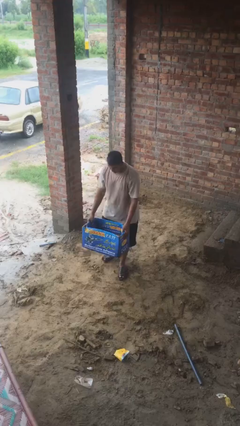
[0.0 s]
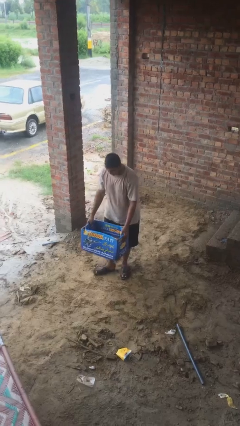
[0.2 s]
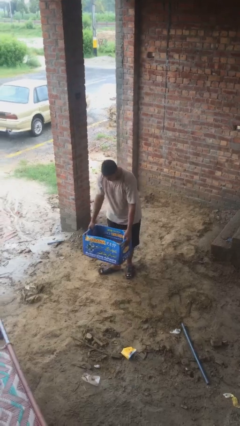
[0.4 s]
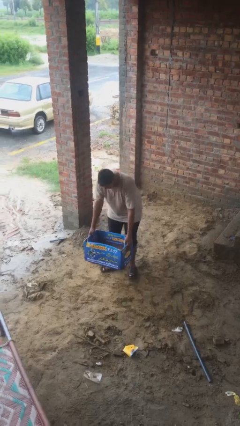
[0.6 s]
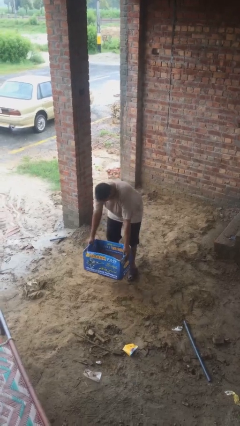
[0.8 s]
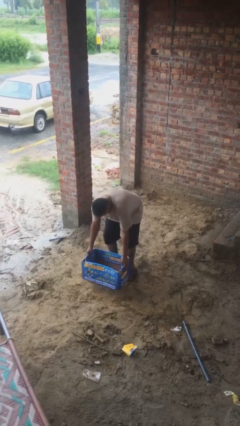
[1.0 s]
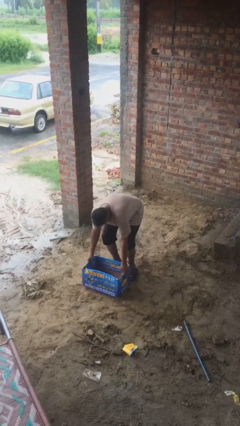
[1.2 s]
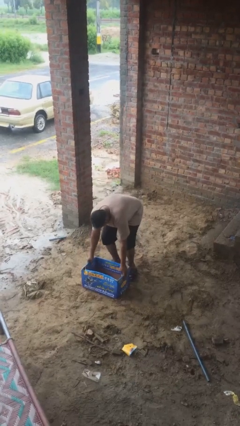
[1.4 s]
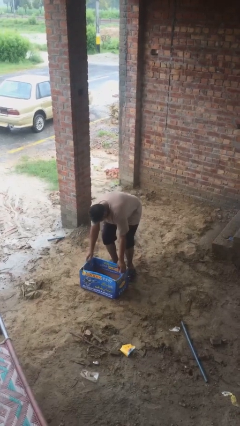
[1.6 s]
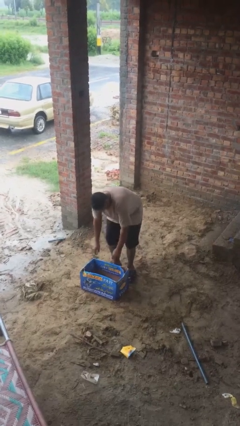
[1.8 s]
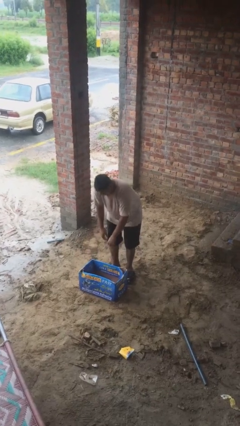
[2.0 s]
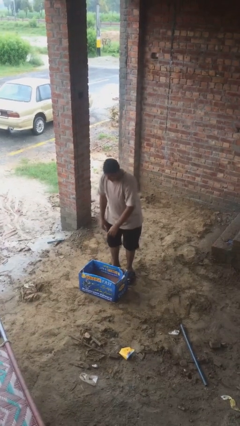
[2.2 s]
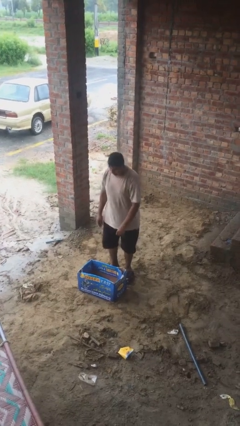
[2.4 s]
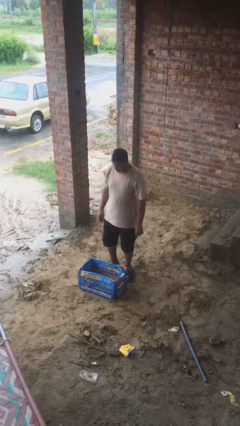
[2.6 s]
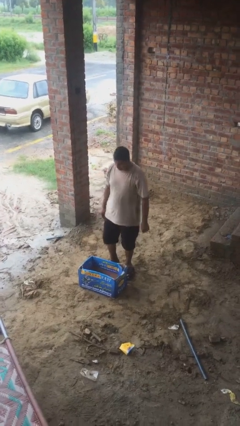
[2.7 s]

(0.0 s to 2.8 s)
person puts down object on floor

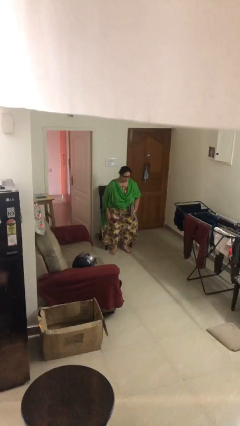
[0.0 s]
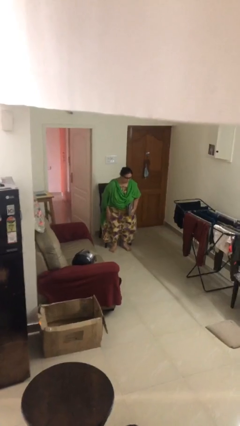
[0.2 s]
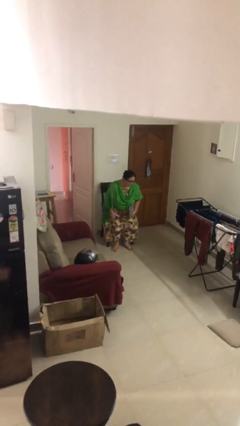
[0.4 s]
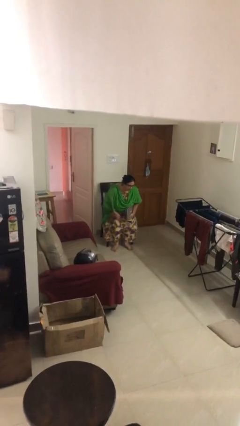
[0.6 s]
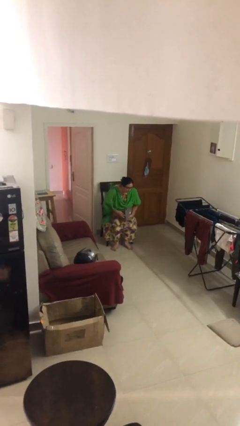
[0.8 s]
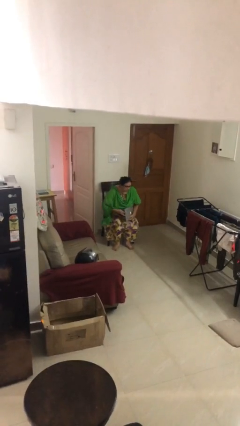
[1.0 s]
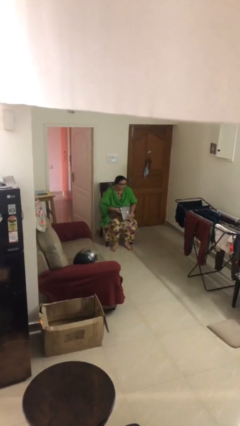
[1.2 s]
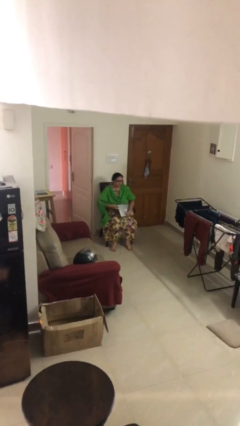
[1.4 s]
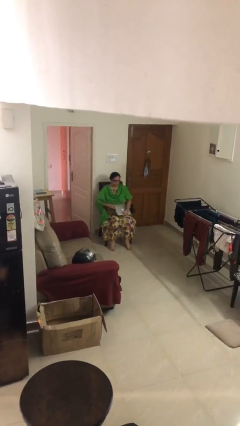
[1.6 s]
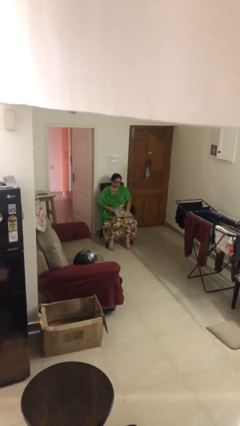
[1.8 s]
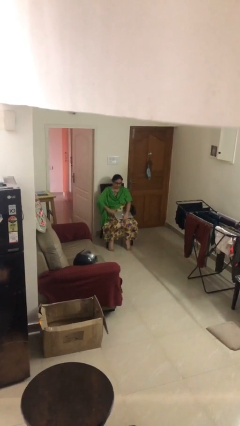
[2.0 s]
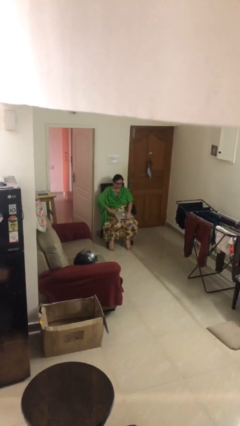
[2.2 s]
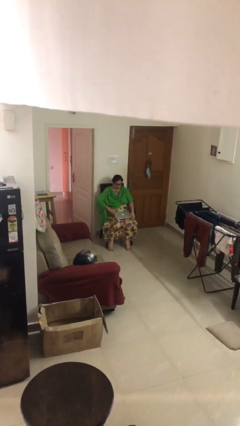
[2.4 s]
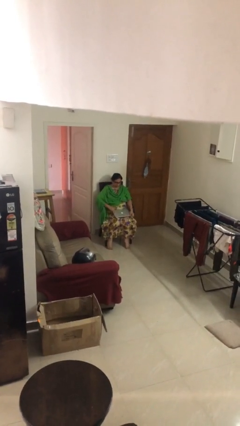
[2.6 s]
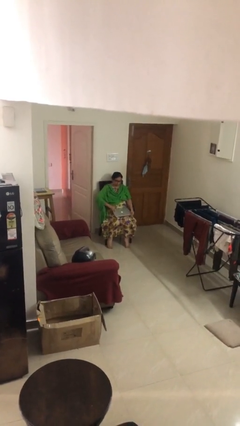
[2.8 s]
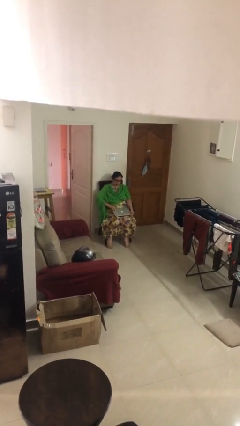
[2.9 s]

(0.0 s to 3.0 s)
person sits down

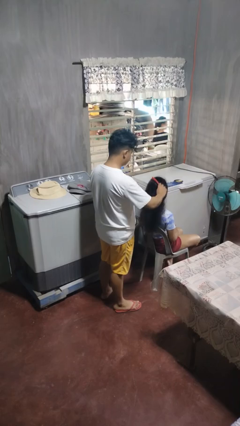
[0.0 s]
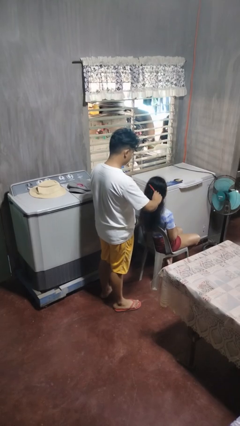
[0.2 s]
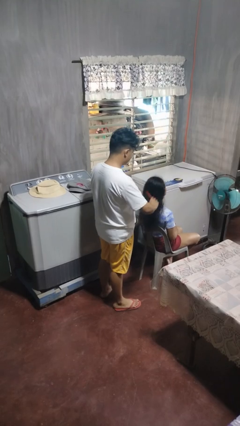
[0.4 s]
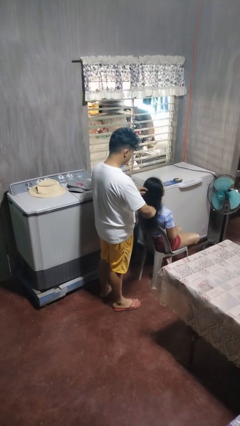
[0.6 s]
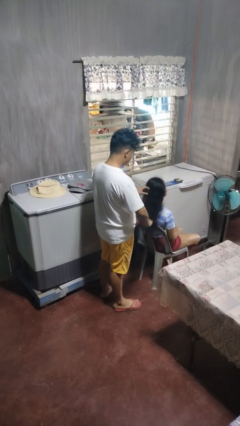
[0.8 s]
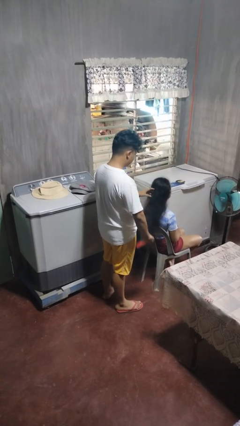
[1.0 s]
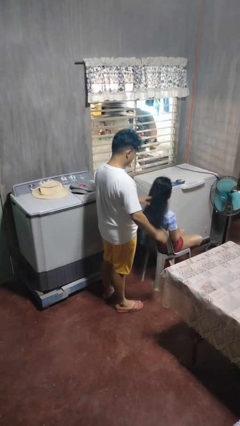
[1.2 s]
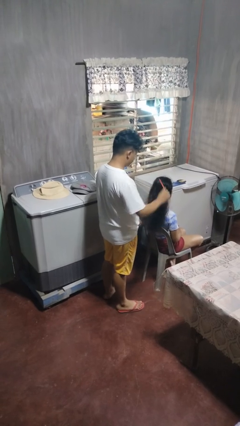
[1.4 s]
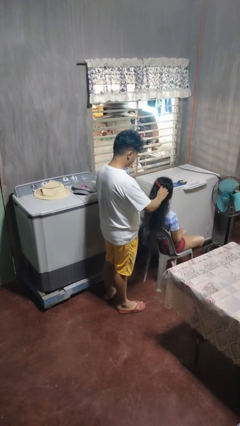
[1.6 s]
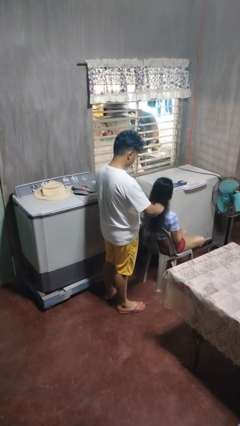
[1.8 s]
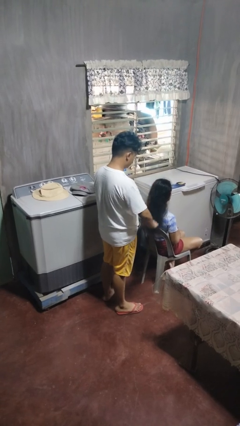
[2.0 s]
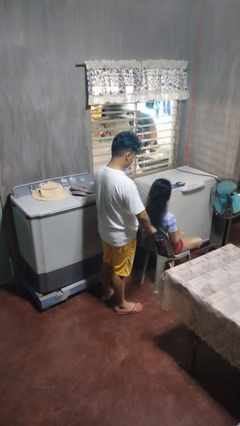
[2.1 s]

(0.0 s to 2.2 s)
person brushes hair of person

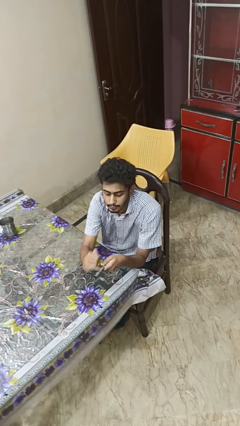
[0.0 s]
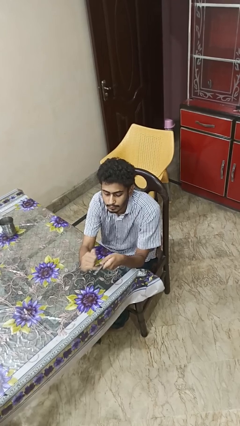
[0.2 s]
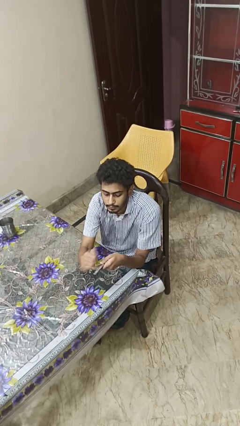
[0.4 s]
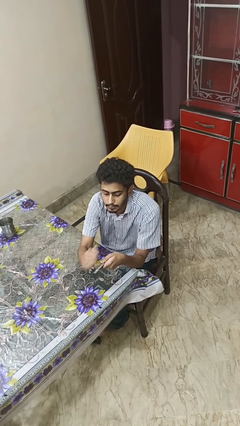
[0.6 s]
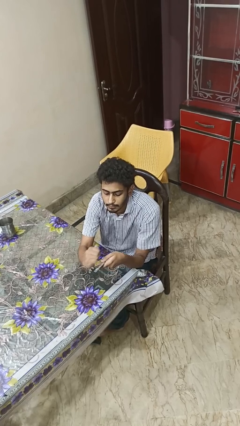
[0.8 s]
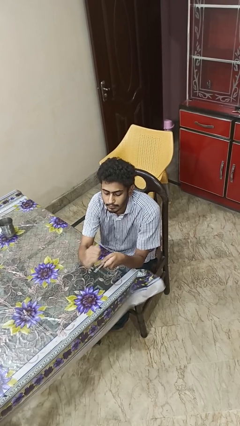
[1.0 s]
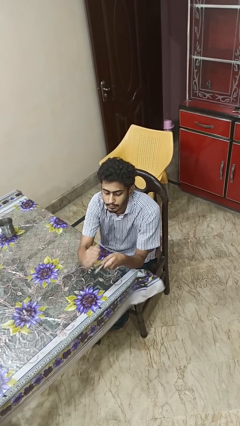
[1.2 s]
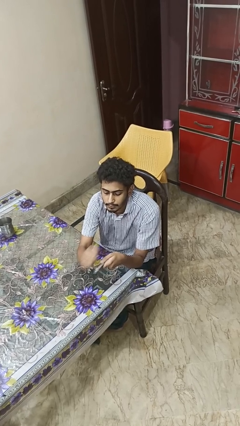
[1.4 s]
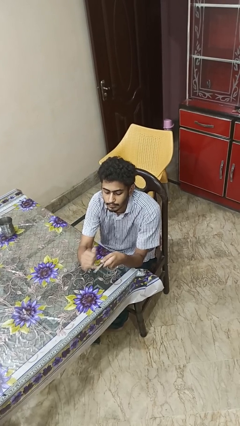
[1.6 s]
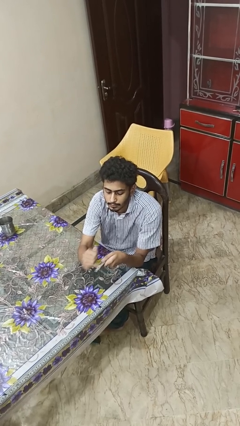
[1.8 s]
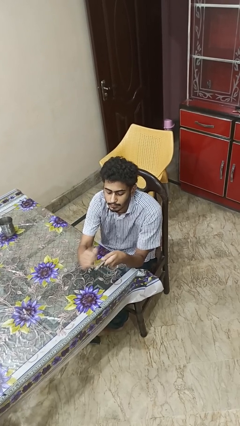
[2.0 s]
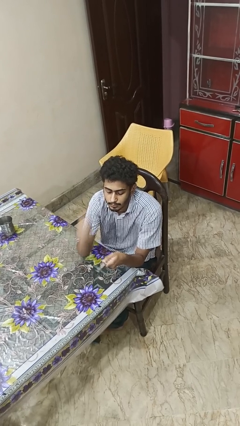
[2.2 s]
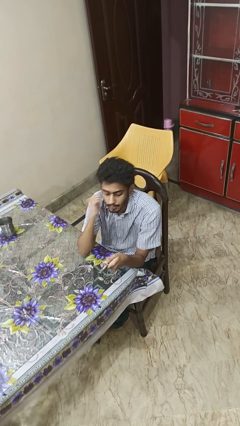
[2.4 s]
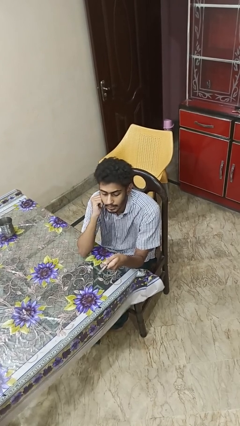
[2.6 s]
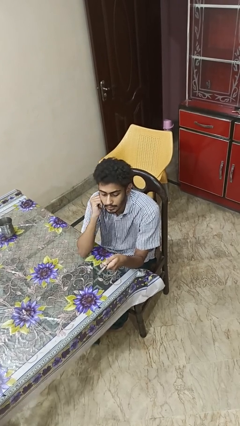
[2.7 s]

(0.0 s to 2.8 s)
person files fingernails

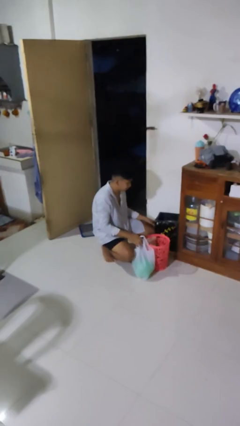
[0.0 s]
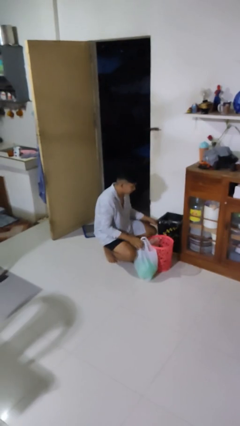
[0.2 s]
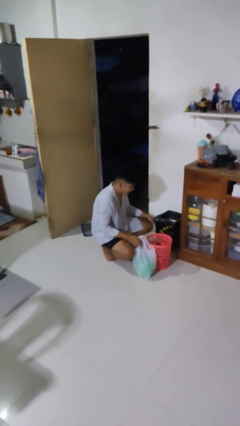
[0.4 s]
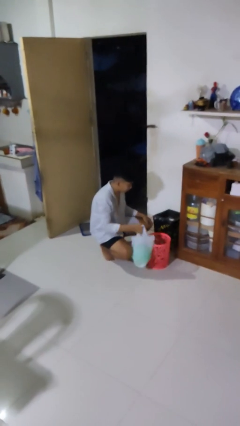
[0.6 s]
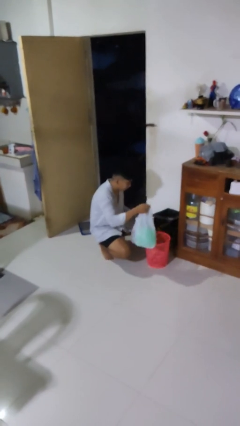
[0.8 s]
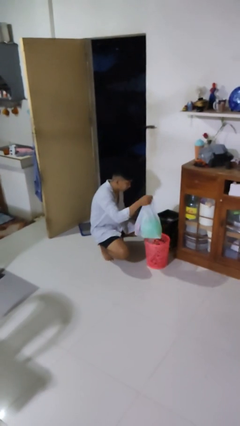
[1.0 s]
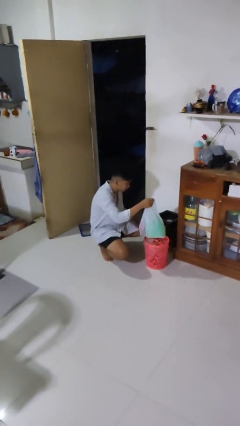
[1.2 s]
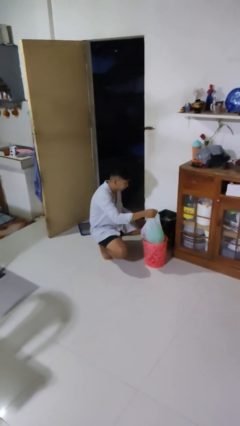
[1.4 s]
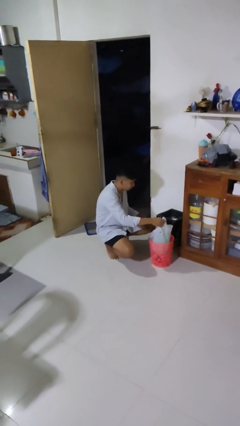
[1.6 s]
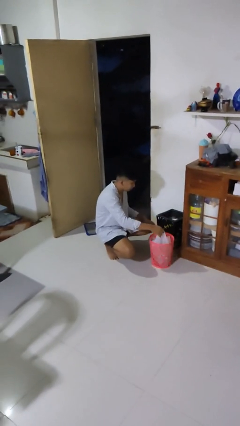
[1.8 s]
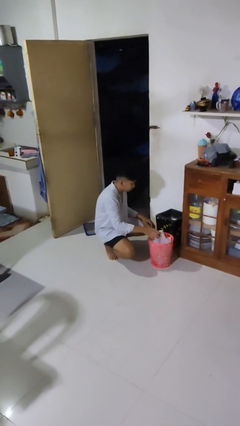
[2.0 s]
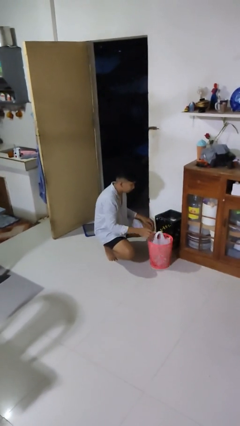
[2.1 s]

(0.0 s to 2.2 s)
person inserts trashbag into trashcan

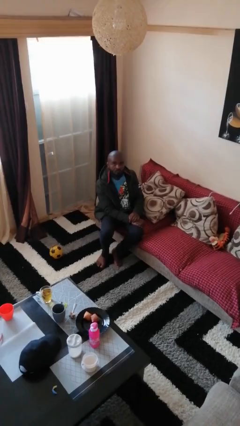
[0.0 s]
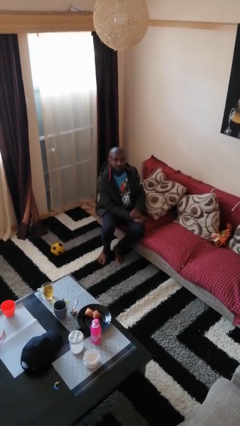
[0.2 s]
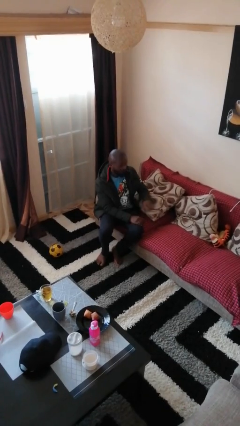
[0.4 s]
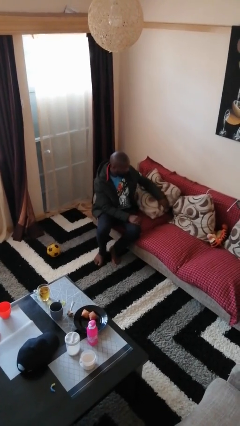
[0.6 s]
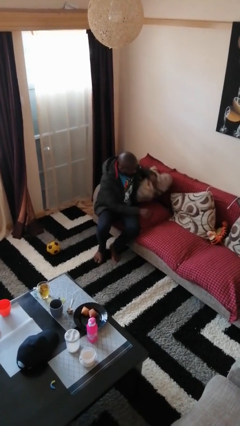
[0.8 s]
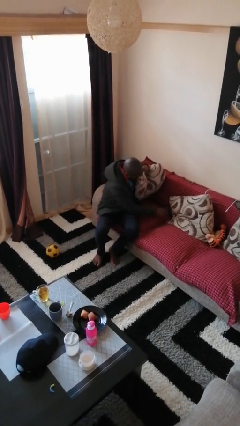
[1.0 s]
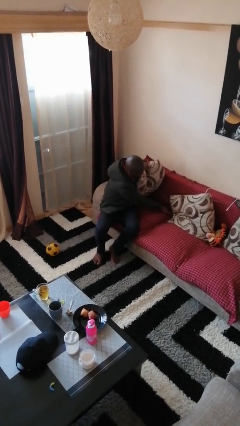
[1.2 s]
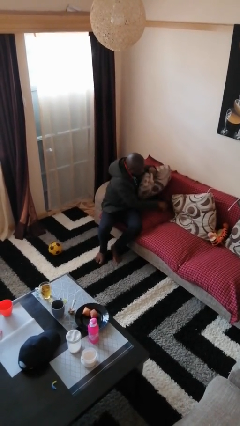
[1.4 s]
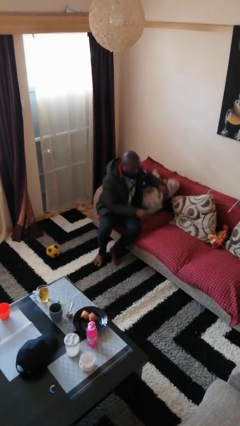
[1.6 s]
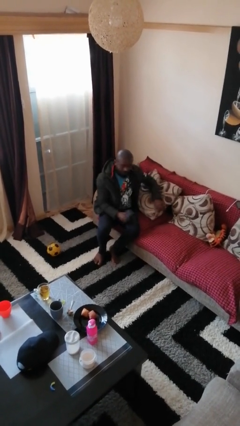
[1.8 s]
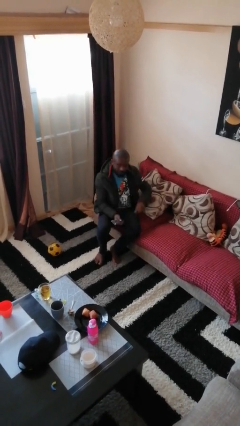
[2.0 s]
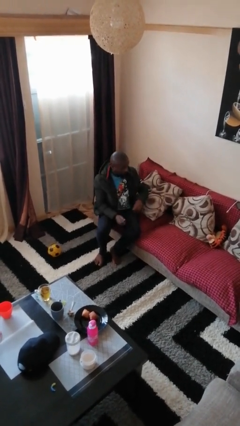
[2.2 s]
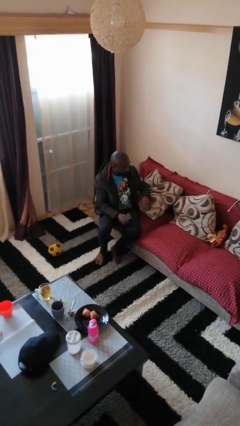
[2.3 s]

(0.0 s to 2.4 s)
person searches in couch

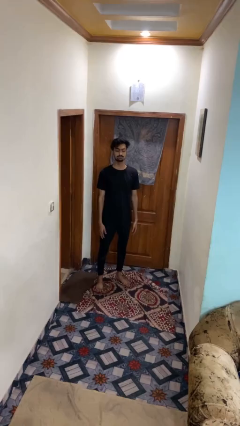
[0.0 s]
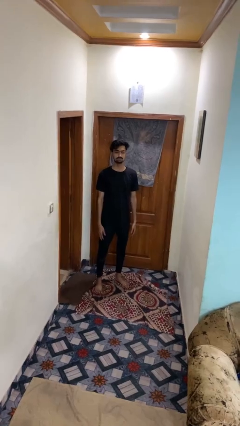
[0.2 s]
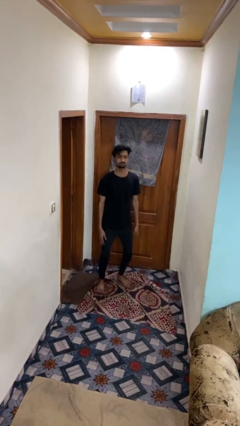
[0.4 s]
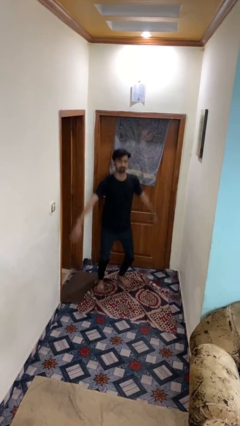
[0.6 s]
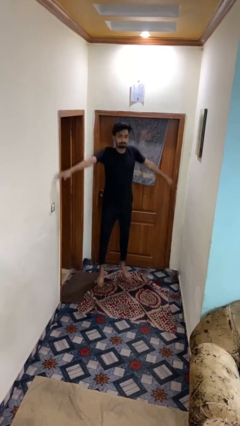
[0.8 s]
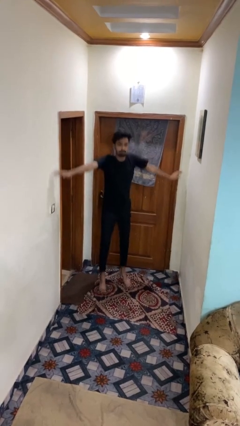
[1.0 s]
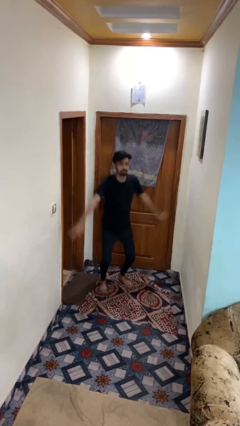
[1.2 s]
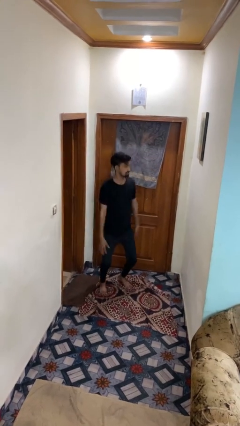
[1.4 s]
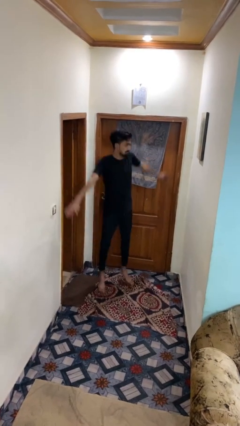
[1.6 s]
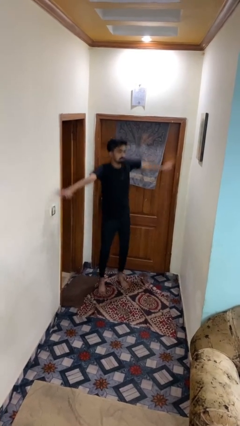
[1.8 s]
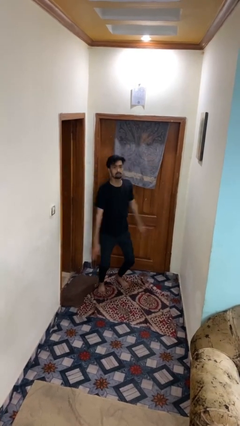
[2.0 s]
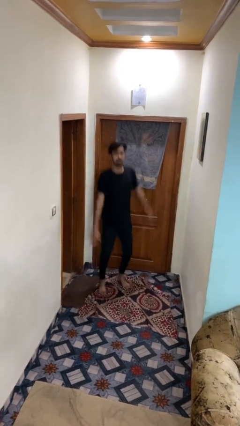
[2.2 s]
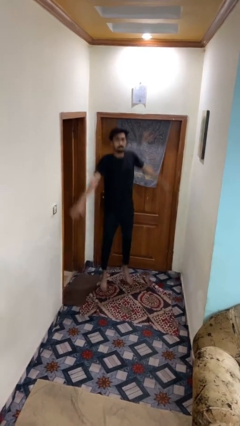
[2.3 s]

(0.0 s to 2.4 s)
person exercises with jumping jacks
